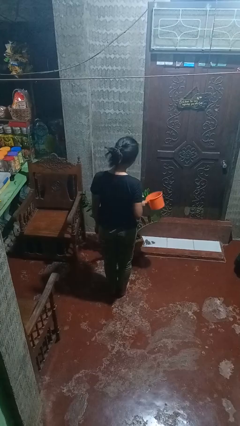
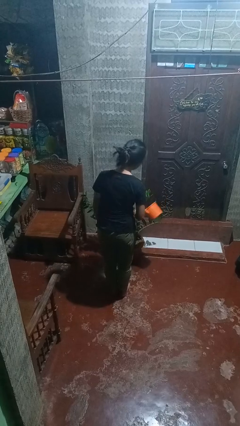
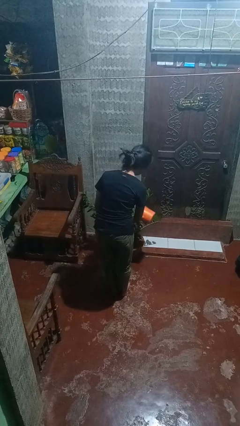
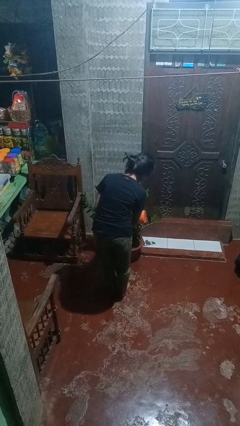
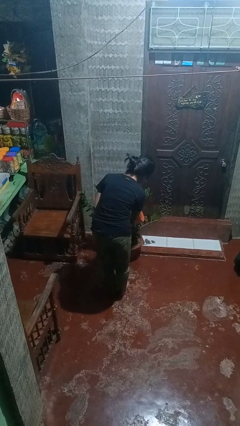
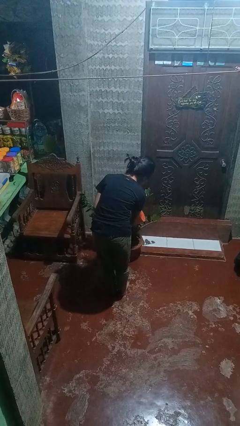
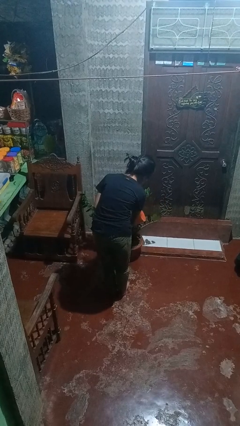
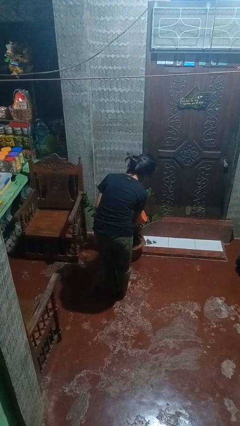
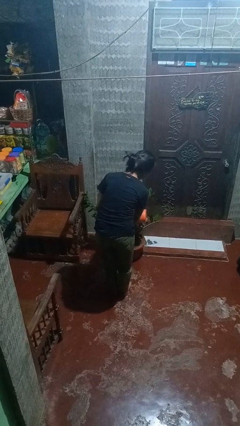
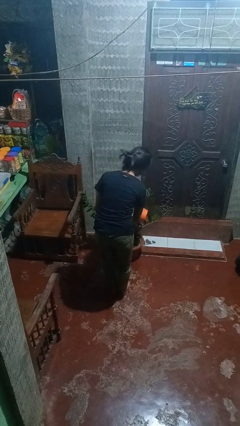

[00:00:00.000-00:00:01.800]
person waters houseplant

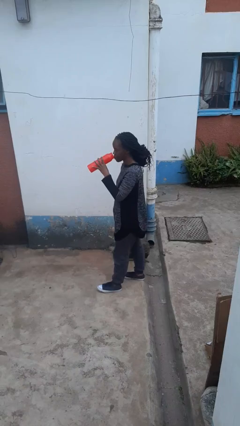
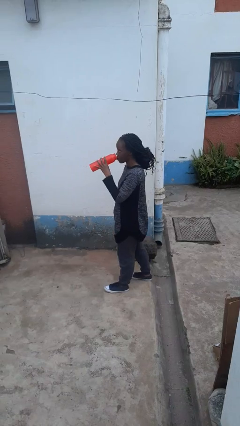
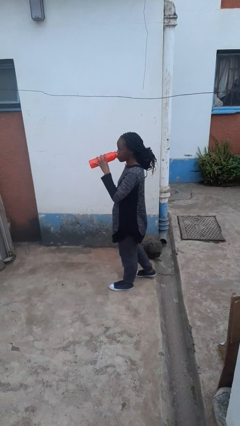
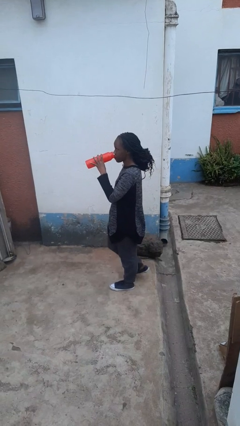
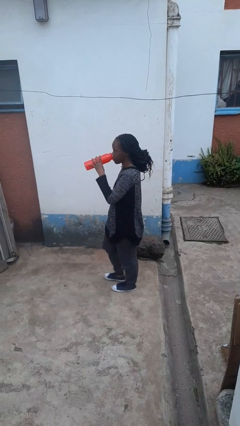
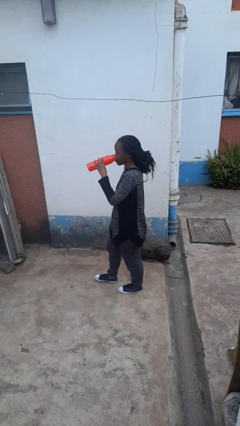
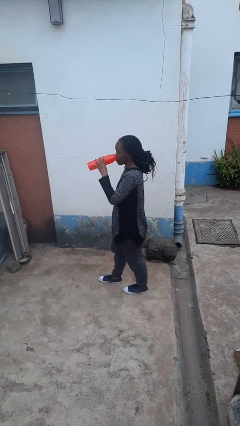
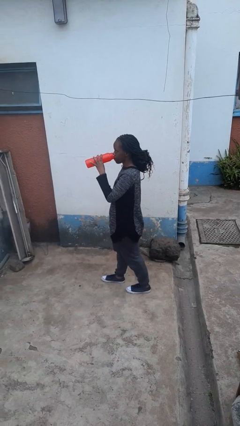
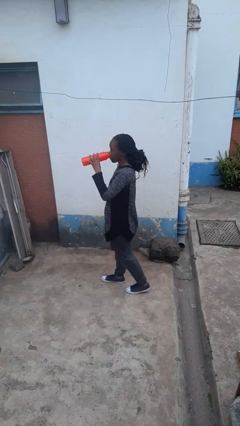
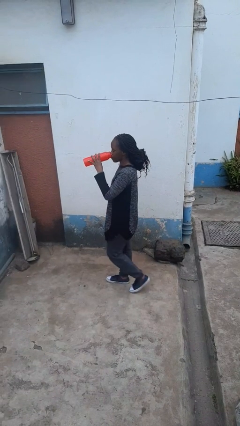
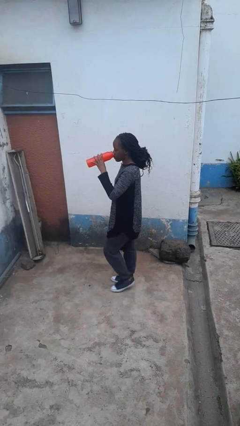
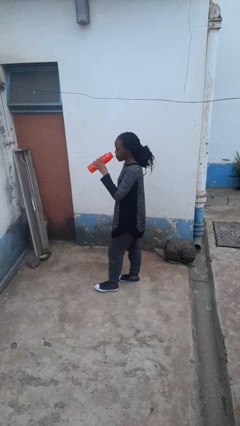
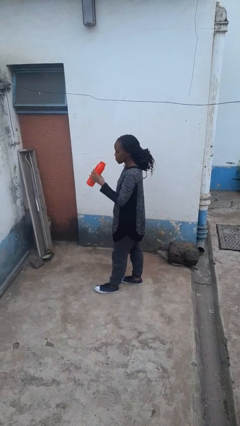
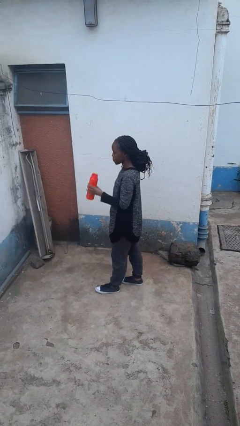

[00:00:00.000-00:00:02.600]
person drinks from bottle

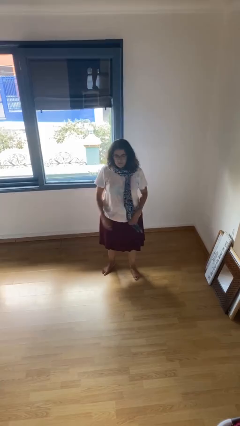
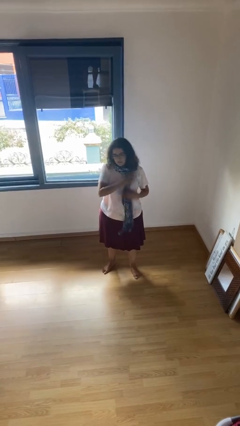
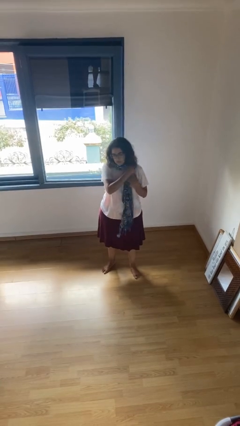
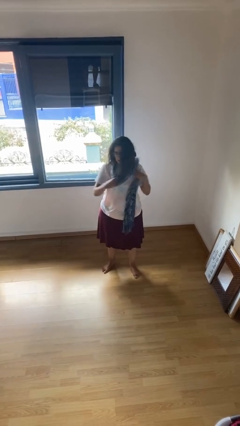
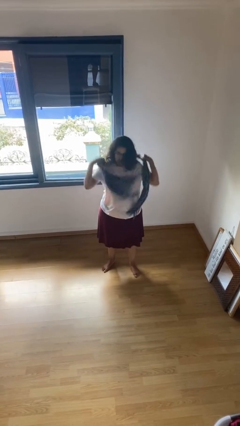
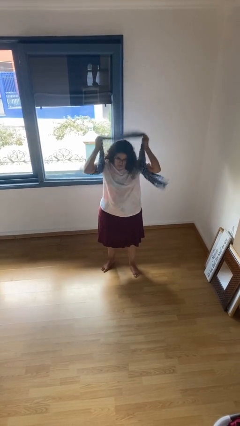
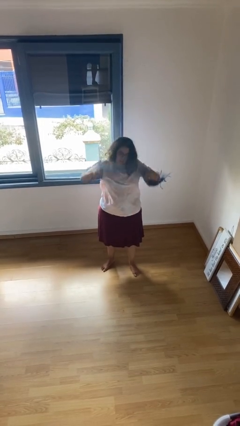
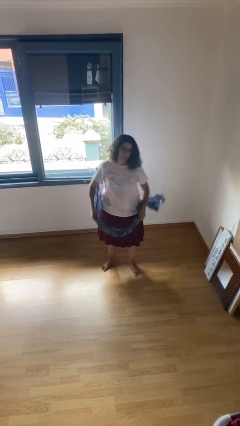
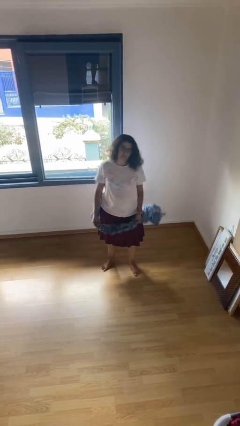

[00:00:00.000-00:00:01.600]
person takes off scarf

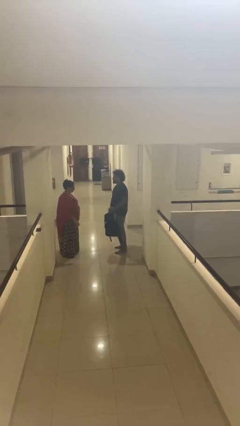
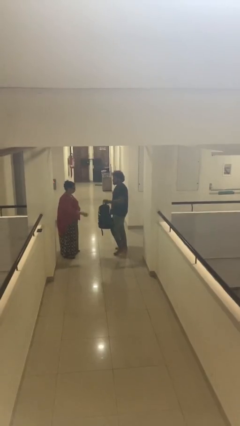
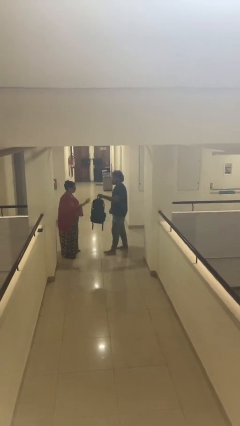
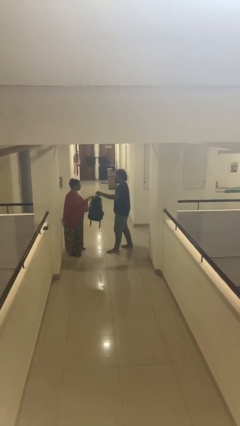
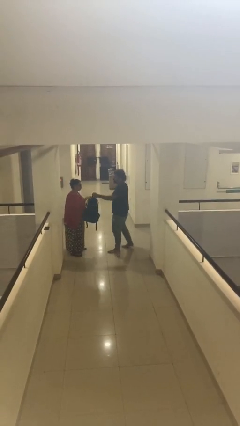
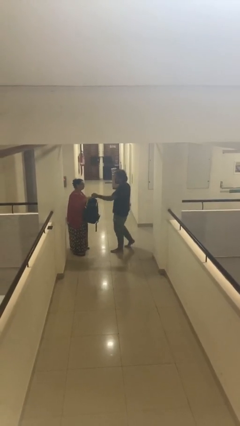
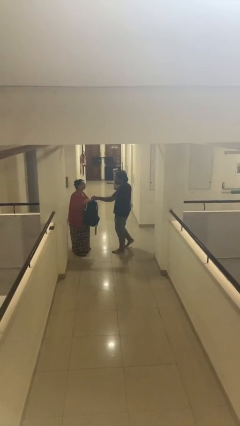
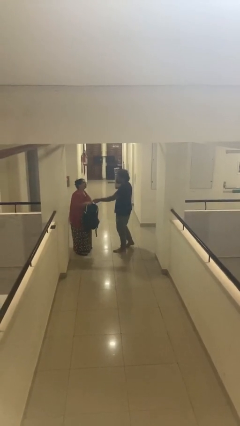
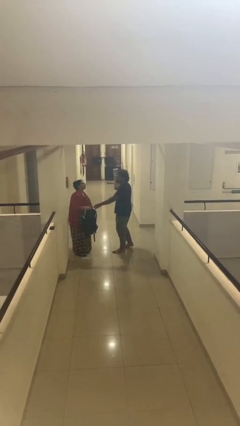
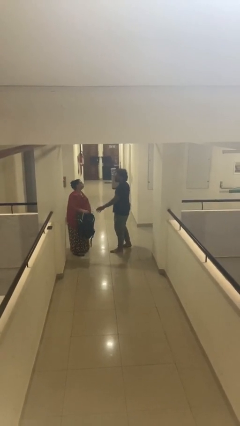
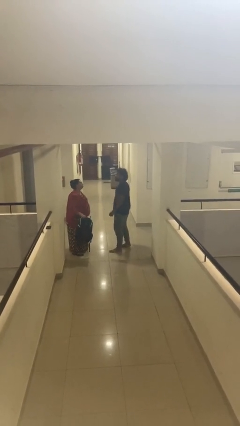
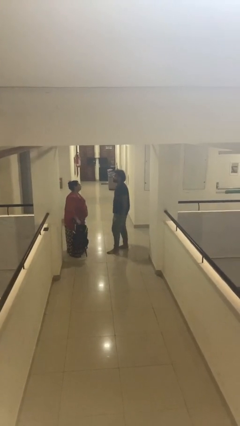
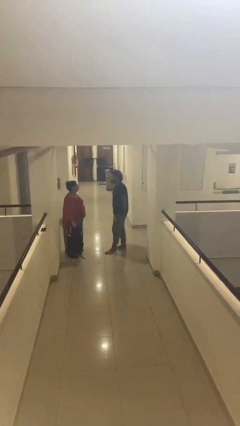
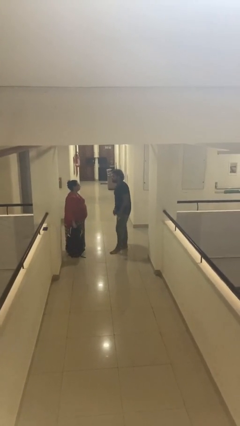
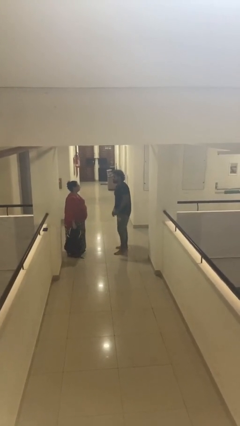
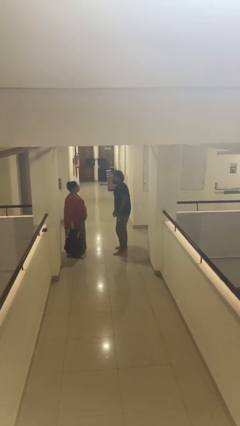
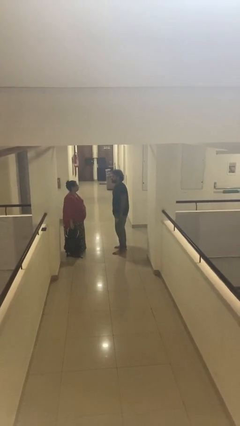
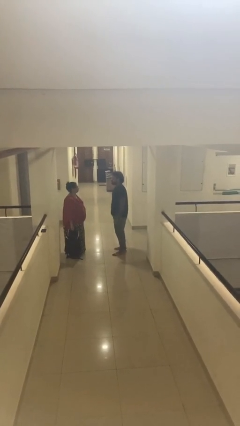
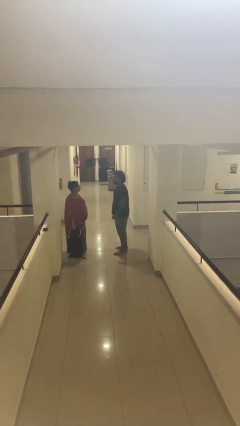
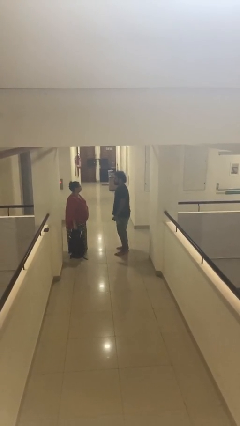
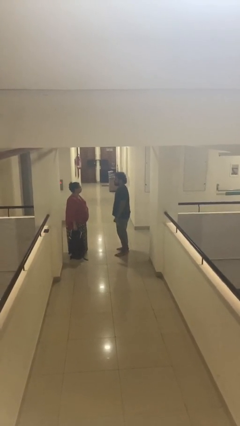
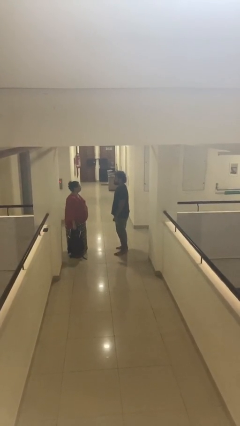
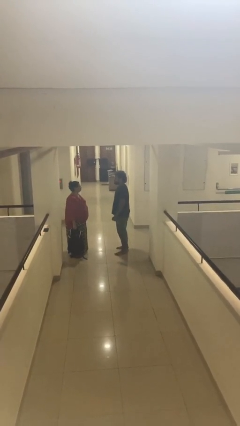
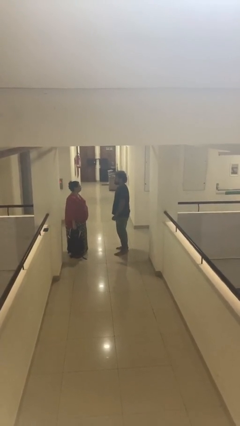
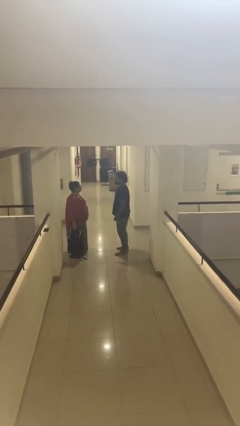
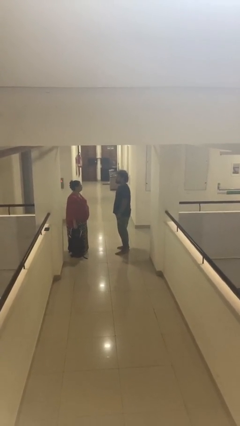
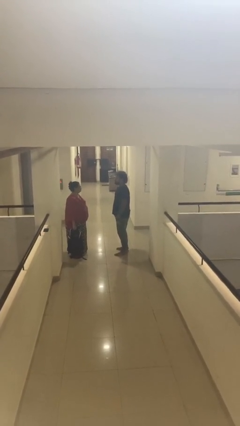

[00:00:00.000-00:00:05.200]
person transfers object to person

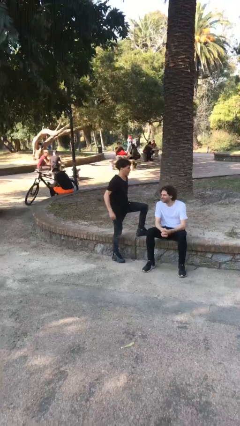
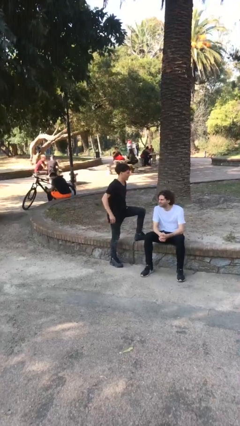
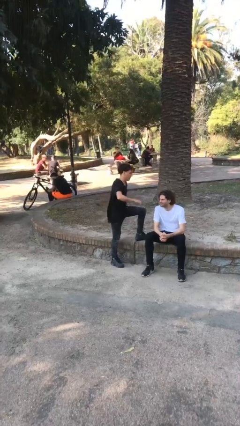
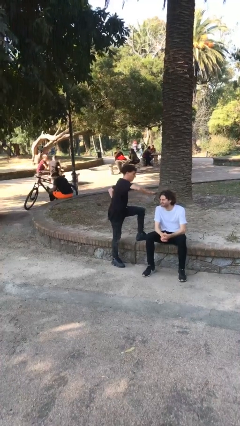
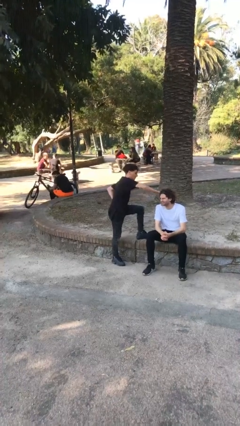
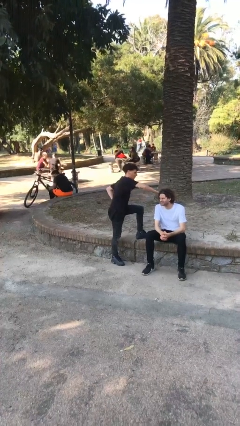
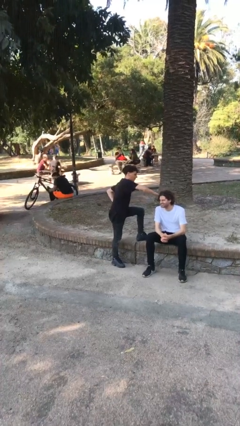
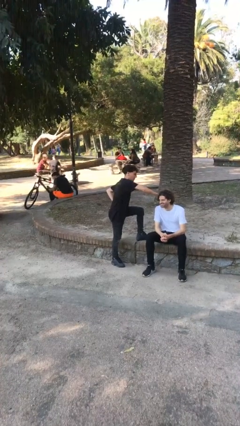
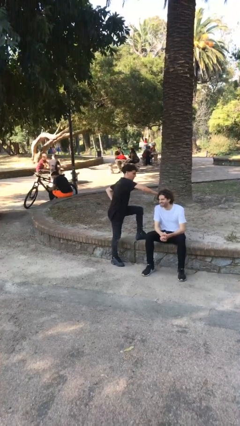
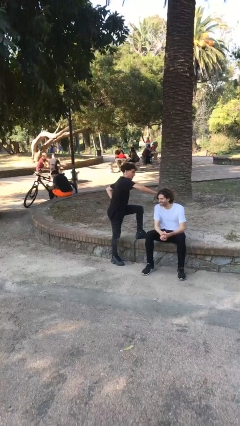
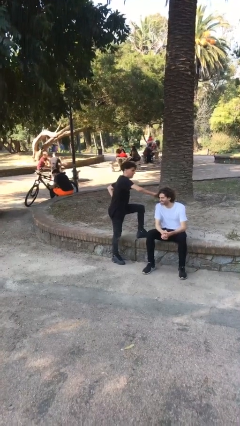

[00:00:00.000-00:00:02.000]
person grabs person by hair

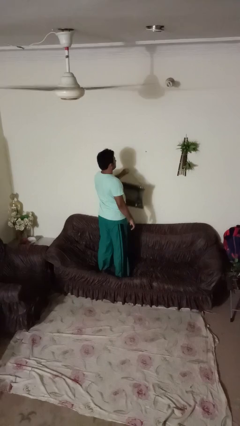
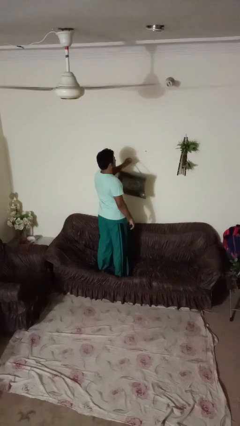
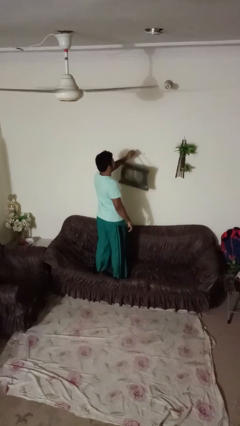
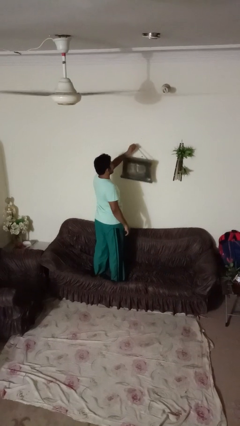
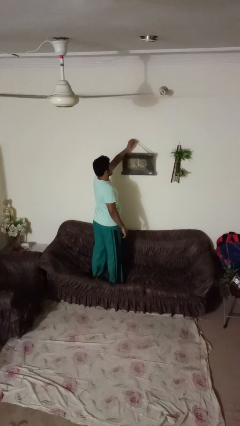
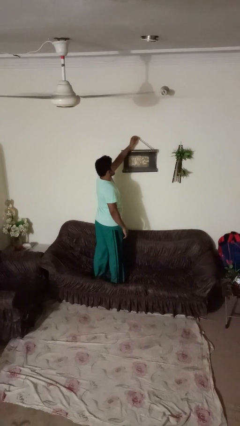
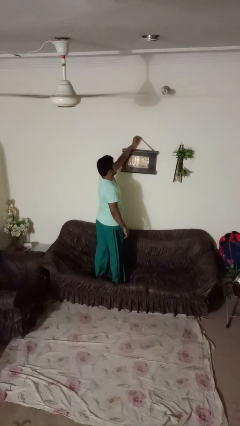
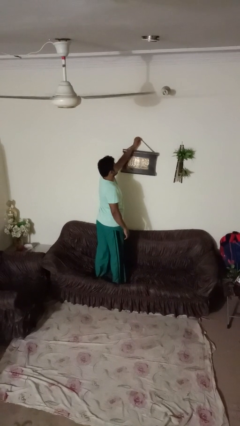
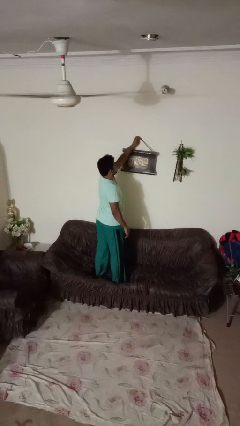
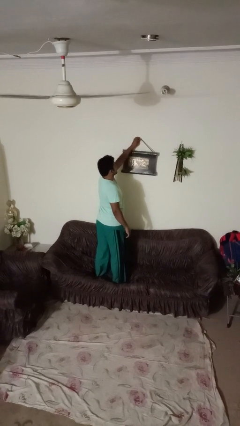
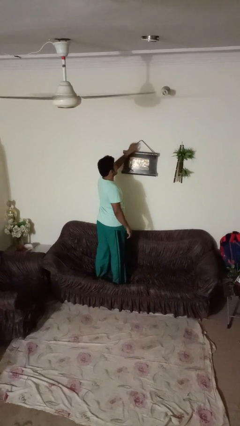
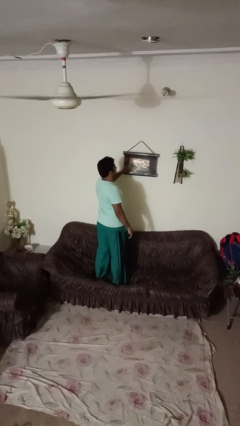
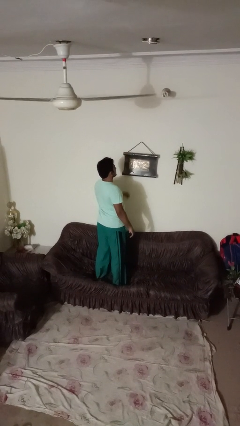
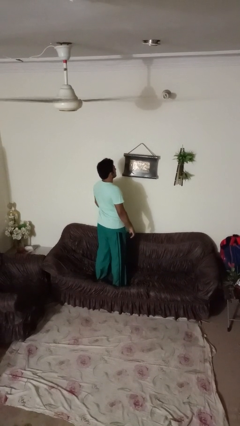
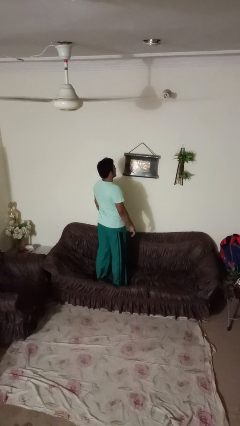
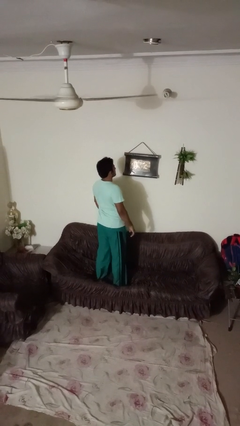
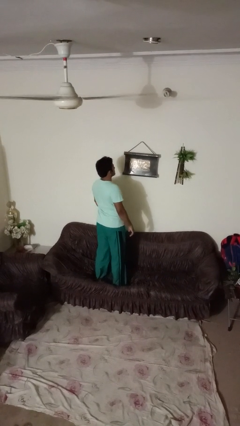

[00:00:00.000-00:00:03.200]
person puts up picture frame
